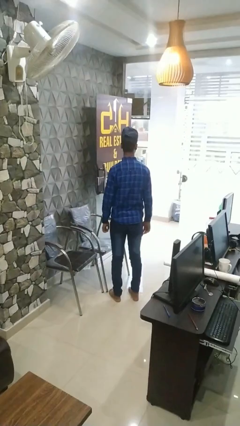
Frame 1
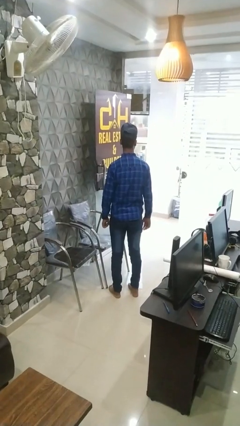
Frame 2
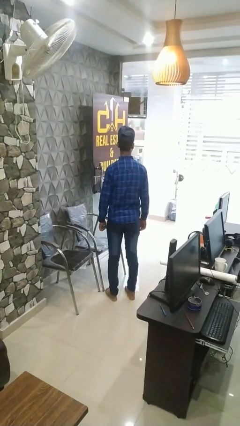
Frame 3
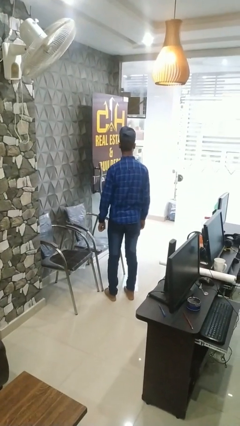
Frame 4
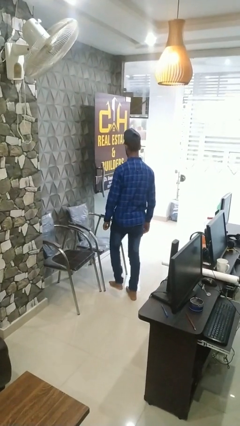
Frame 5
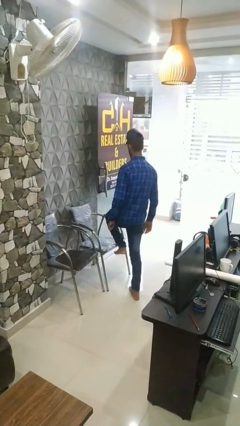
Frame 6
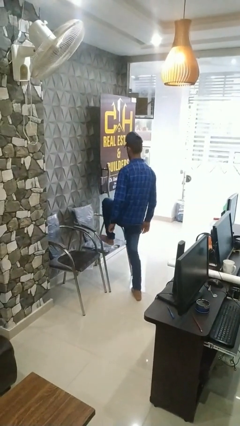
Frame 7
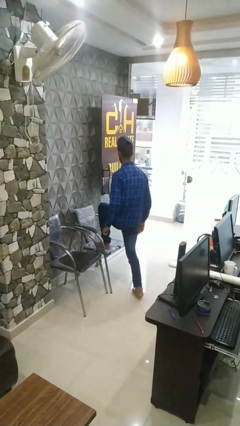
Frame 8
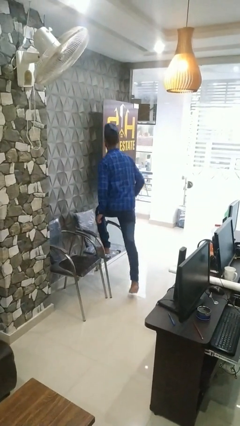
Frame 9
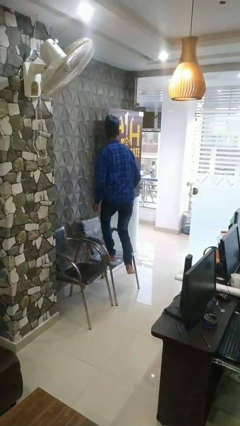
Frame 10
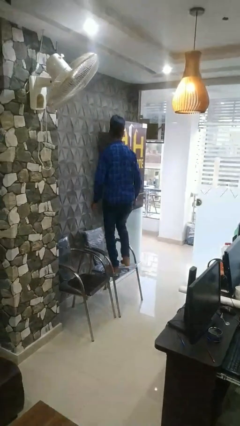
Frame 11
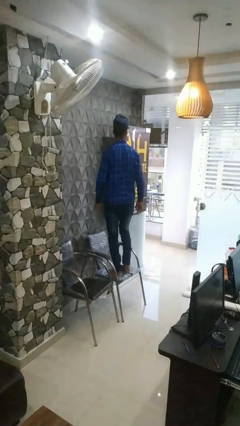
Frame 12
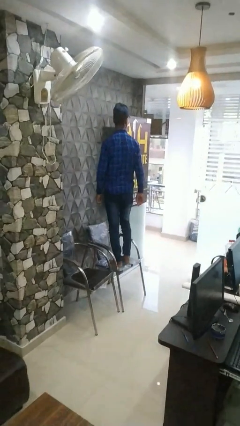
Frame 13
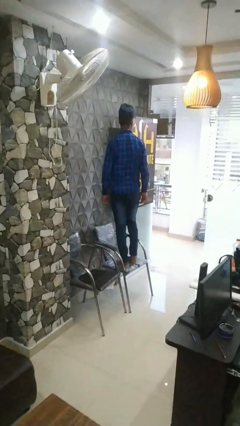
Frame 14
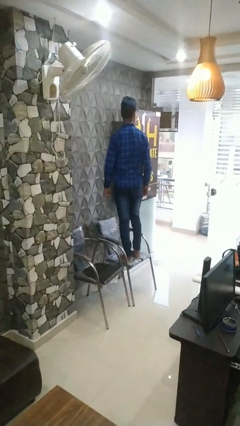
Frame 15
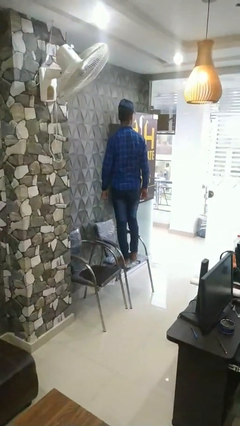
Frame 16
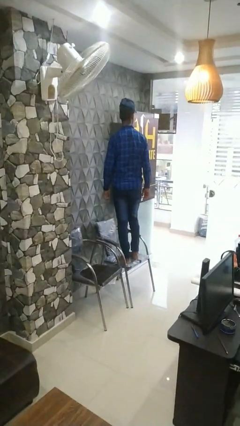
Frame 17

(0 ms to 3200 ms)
person climbs on chair

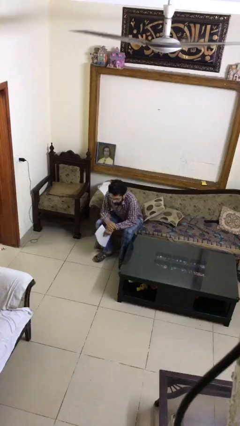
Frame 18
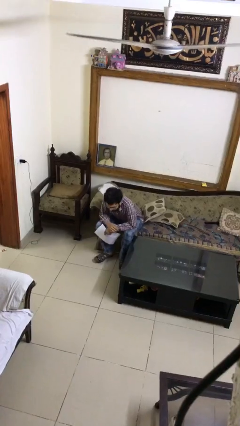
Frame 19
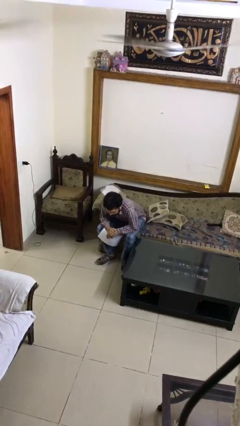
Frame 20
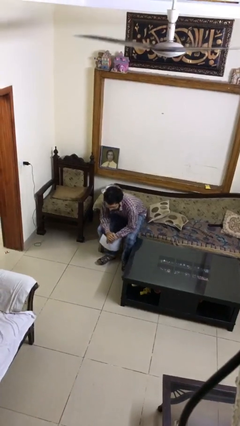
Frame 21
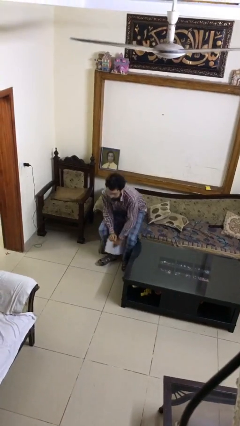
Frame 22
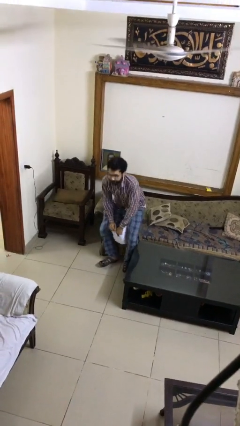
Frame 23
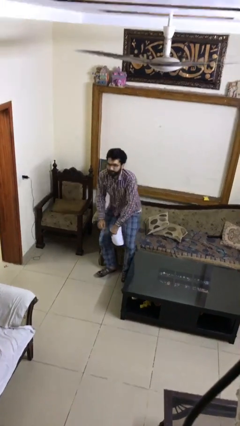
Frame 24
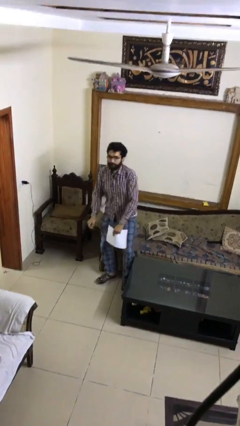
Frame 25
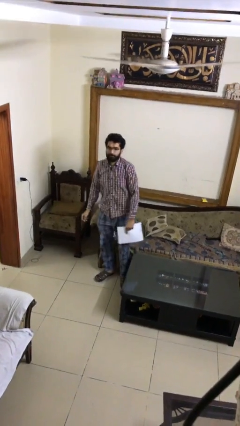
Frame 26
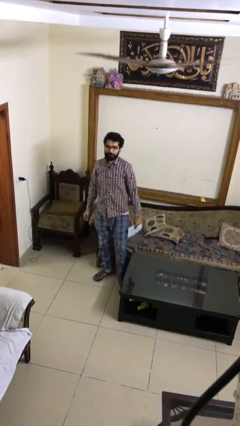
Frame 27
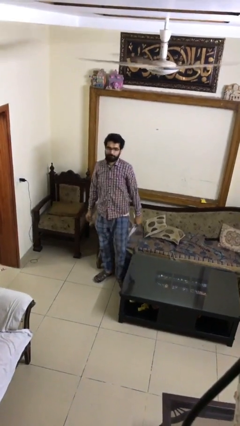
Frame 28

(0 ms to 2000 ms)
person stands up

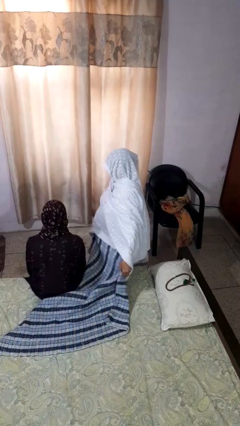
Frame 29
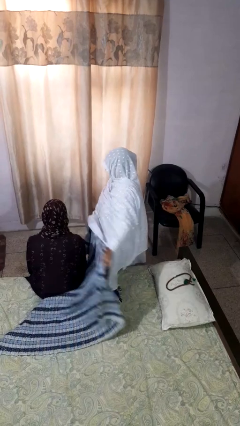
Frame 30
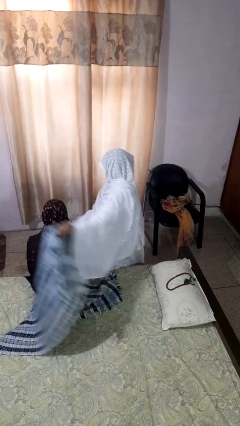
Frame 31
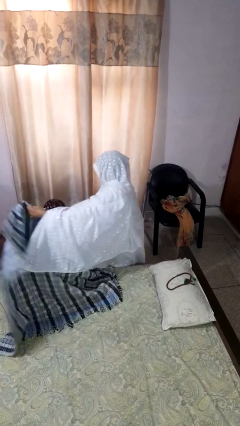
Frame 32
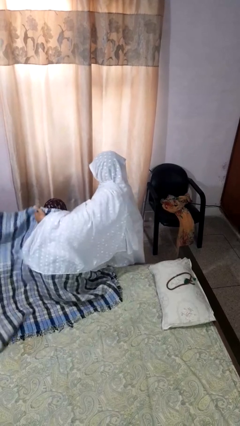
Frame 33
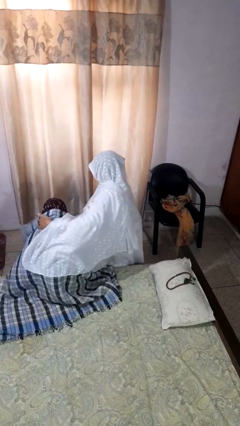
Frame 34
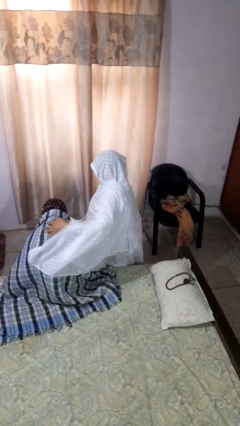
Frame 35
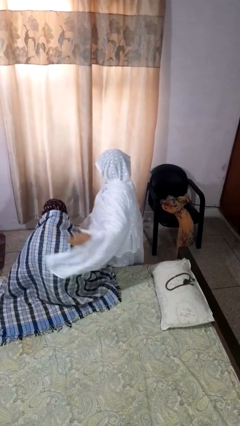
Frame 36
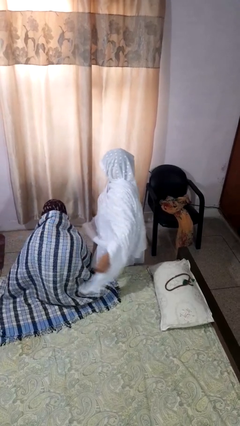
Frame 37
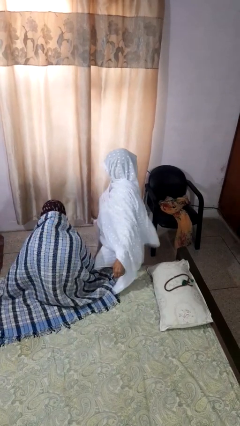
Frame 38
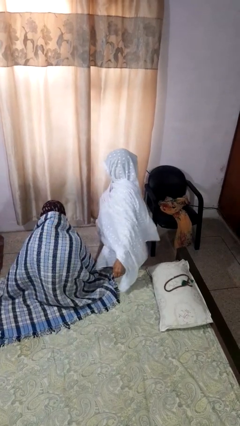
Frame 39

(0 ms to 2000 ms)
person covers friend with blanket

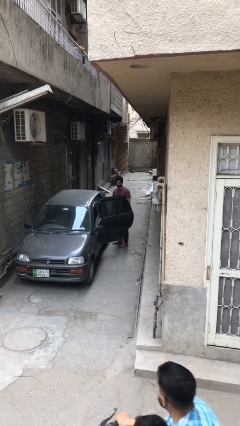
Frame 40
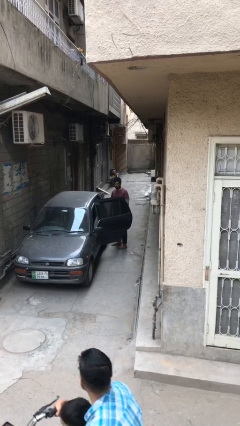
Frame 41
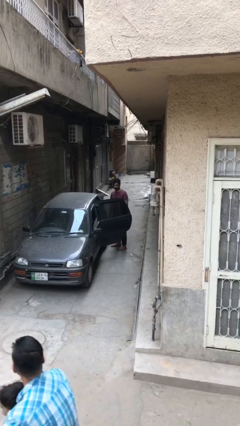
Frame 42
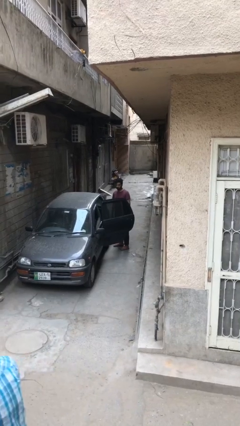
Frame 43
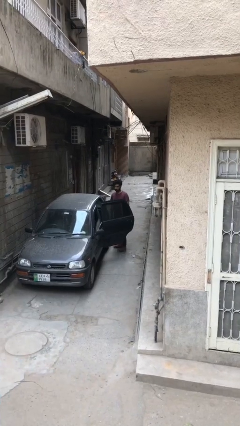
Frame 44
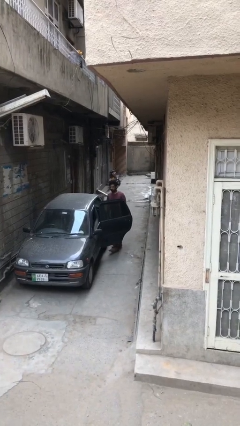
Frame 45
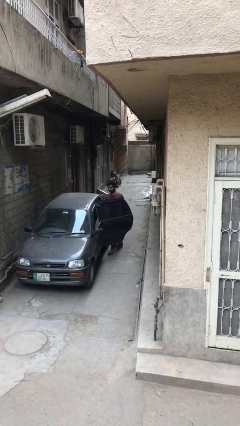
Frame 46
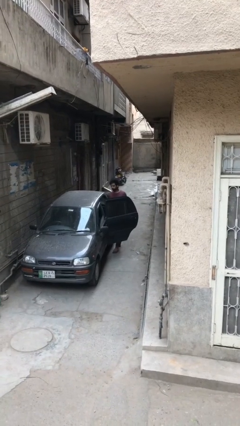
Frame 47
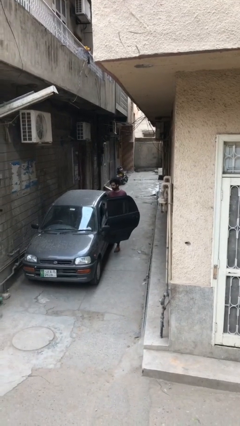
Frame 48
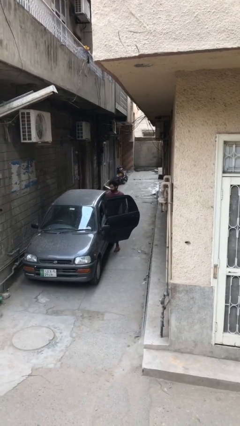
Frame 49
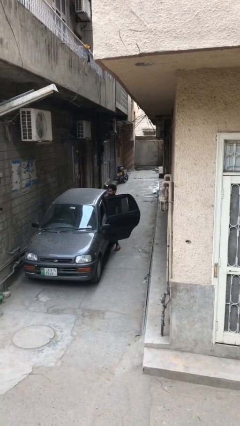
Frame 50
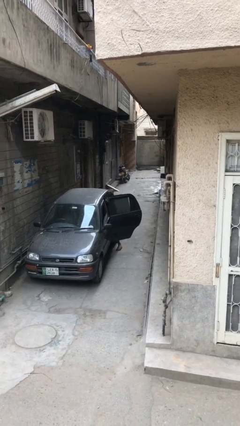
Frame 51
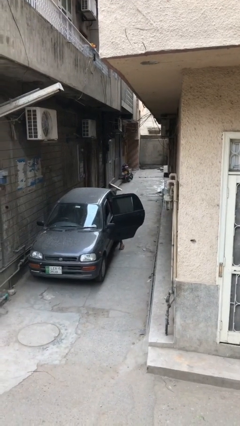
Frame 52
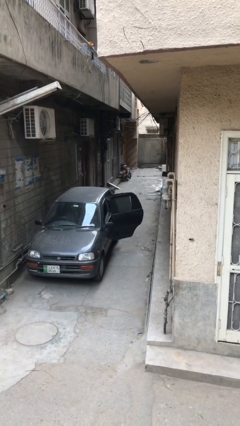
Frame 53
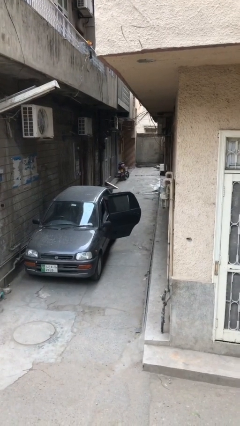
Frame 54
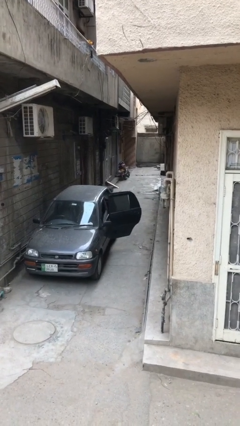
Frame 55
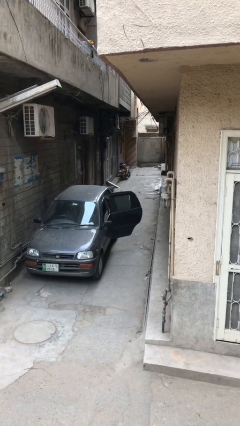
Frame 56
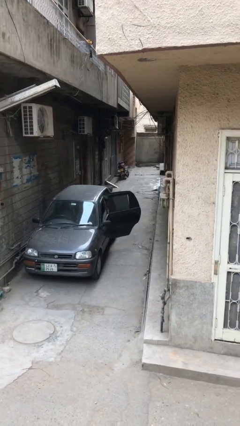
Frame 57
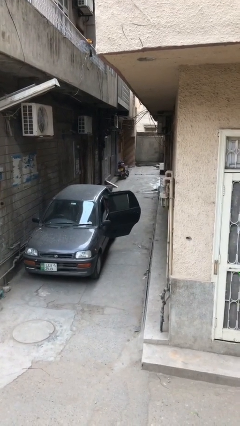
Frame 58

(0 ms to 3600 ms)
person enters car

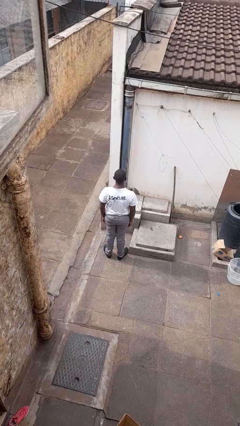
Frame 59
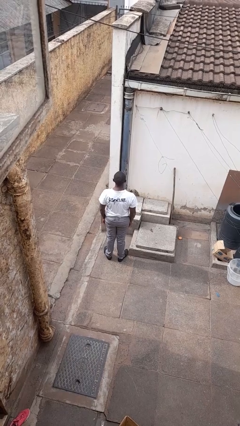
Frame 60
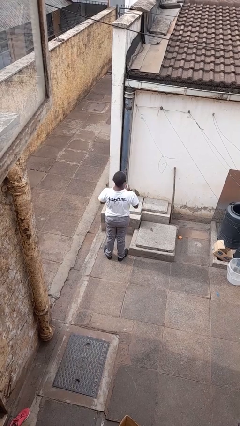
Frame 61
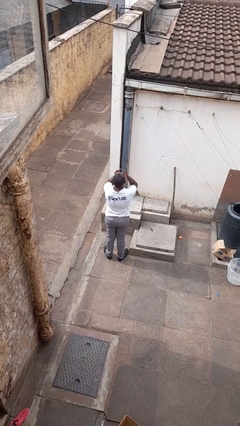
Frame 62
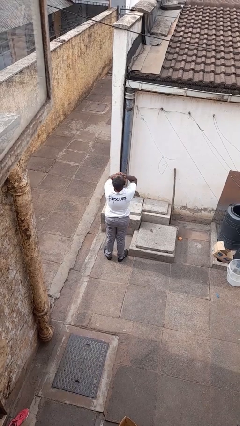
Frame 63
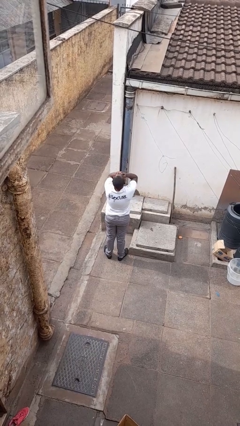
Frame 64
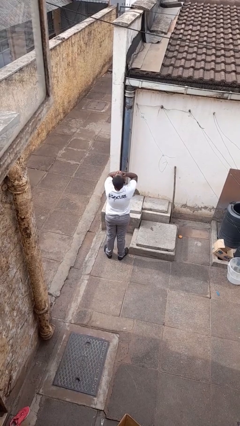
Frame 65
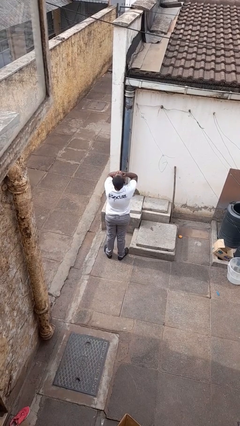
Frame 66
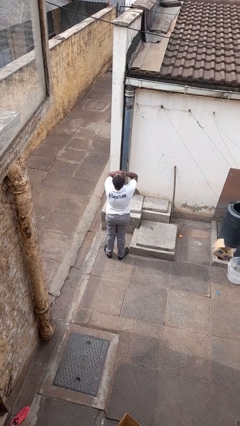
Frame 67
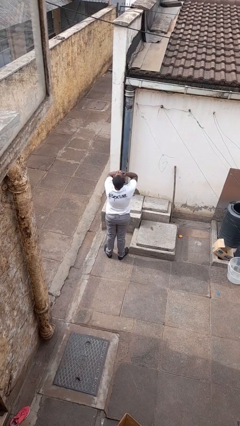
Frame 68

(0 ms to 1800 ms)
person covers face with hands

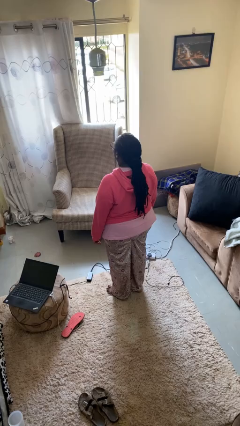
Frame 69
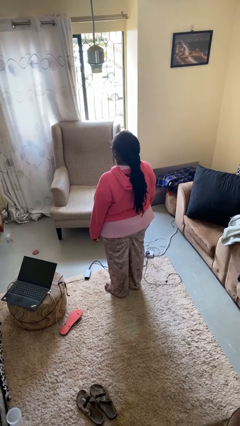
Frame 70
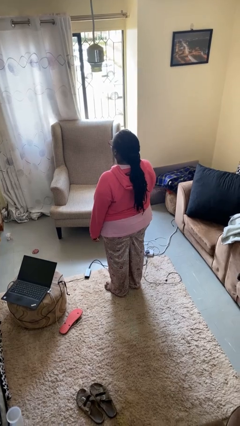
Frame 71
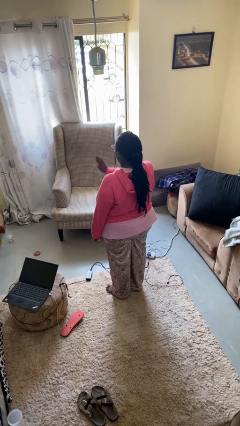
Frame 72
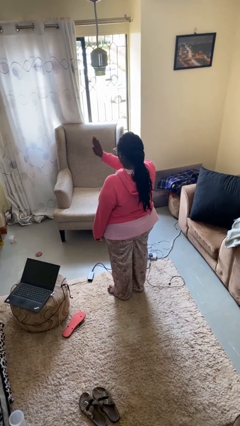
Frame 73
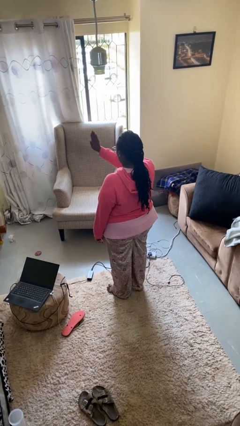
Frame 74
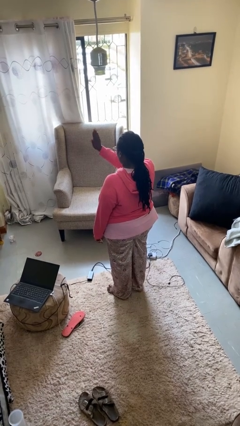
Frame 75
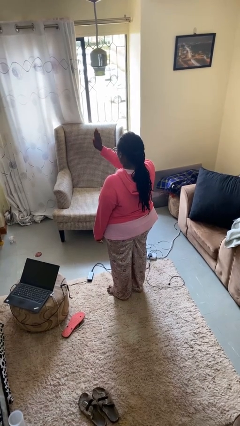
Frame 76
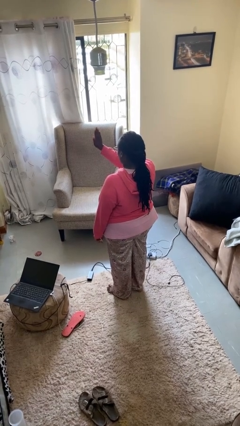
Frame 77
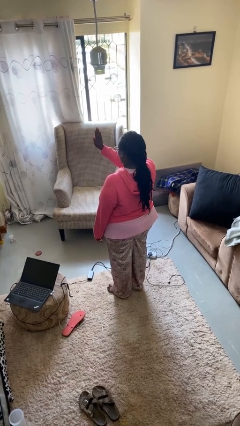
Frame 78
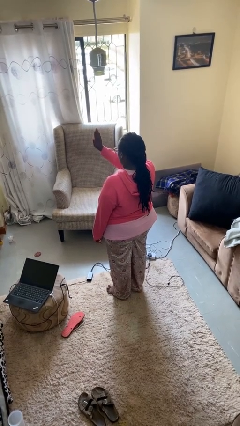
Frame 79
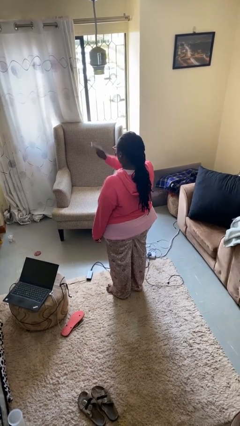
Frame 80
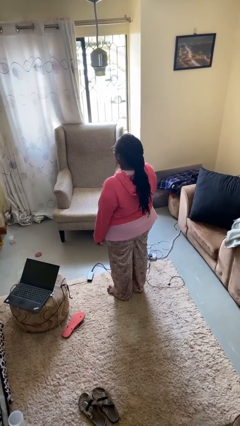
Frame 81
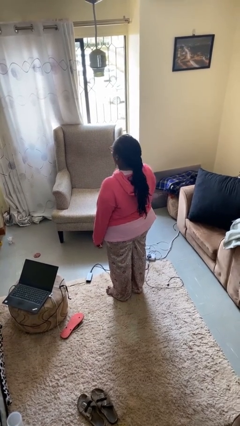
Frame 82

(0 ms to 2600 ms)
person gestures stop

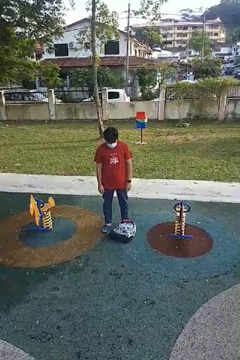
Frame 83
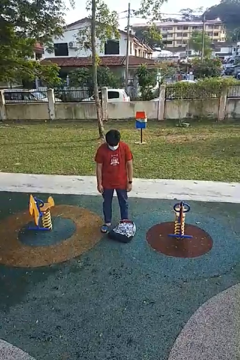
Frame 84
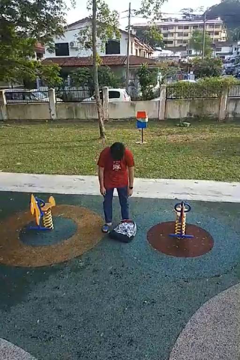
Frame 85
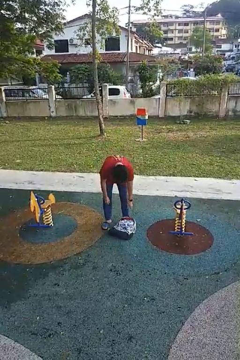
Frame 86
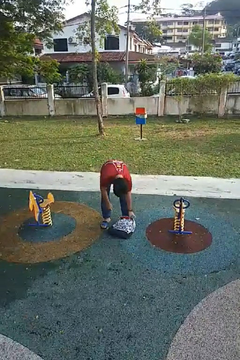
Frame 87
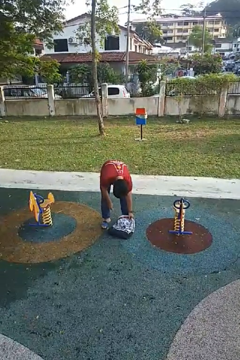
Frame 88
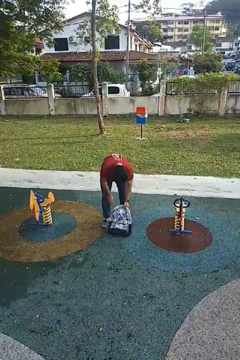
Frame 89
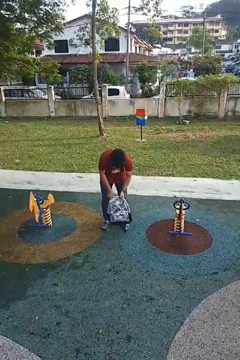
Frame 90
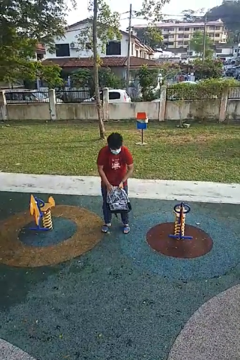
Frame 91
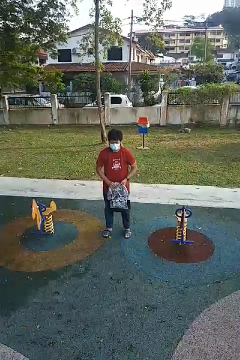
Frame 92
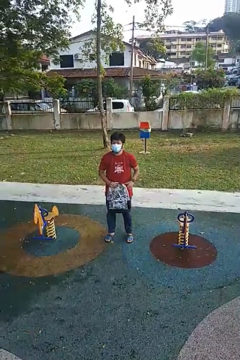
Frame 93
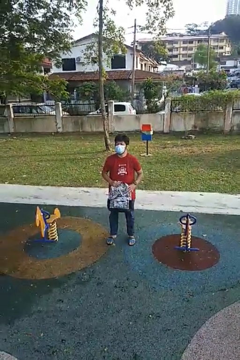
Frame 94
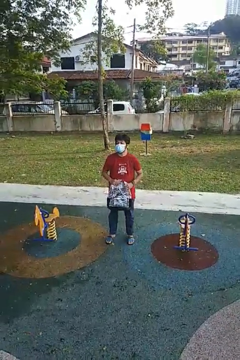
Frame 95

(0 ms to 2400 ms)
person picks up object from floor

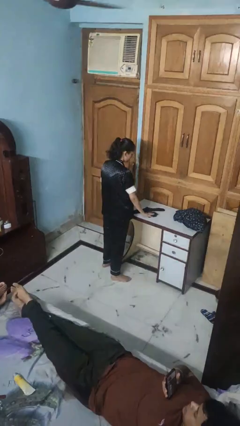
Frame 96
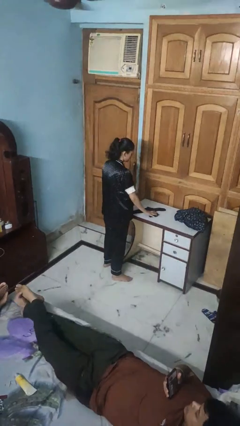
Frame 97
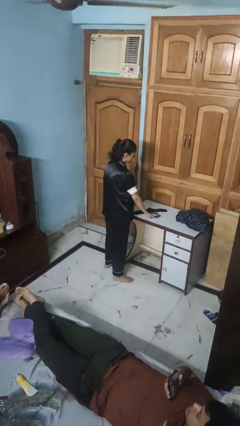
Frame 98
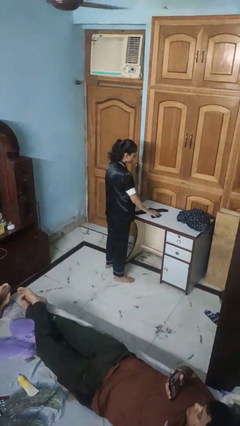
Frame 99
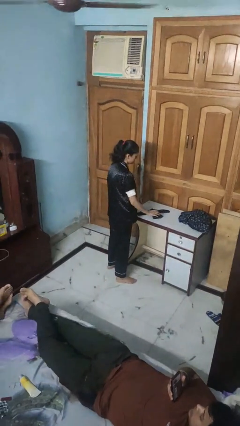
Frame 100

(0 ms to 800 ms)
person folds socks
